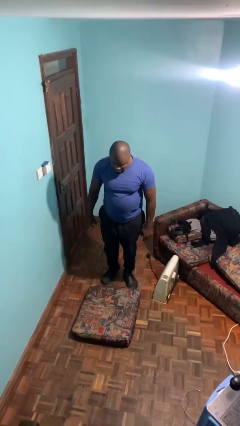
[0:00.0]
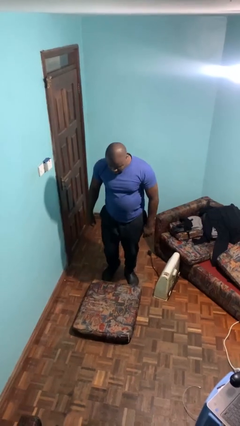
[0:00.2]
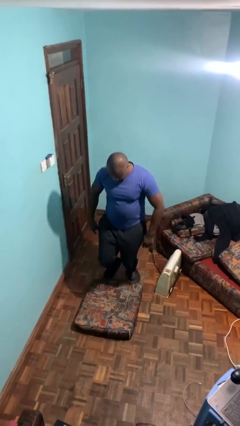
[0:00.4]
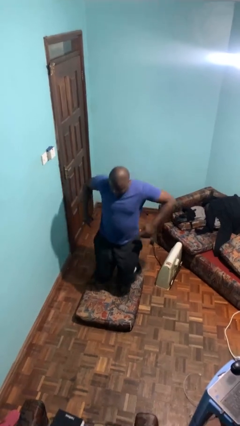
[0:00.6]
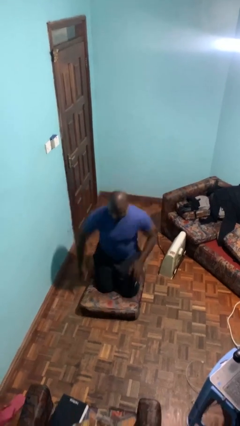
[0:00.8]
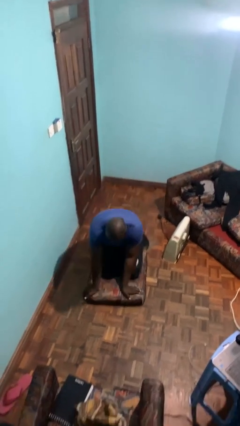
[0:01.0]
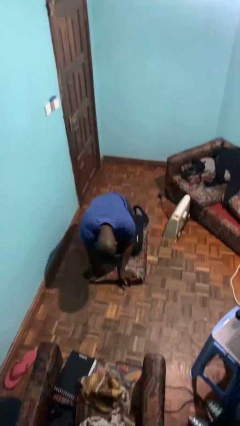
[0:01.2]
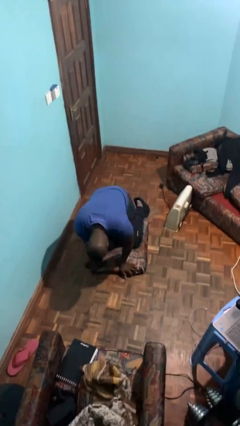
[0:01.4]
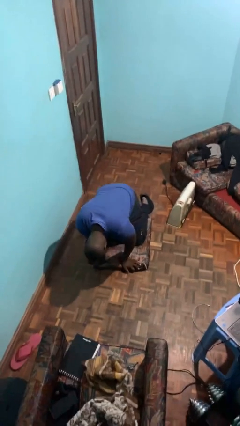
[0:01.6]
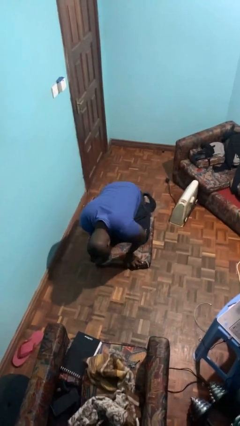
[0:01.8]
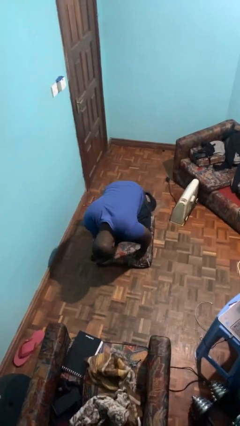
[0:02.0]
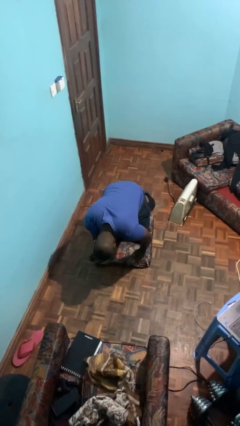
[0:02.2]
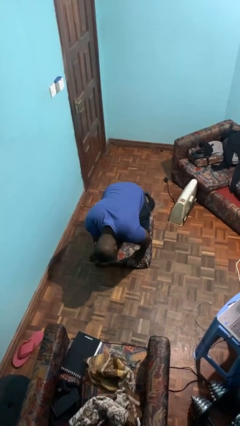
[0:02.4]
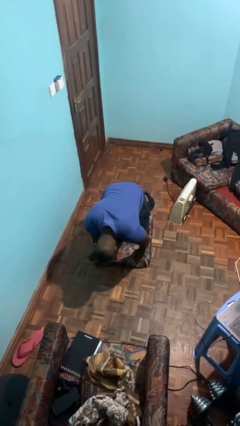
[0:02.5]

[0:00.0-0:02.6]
person trips on object on floor

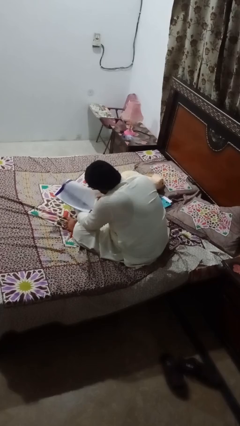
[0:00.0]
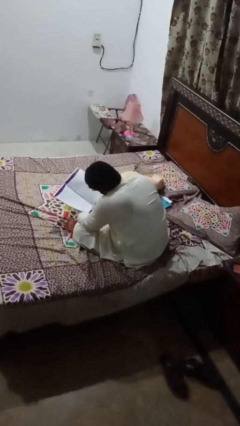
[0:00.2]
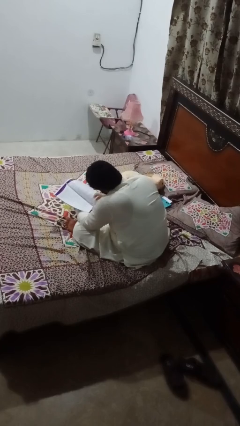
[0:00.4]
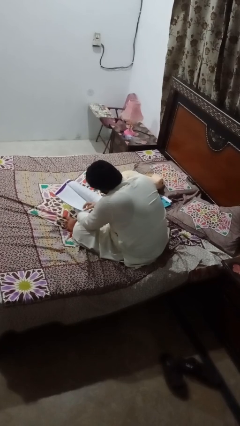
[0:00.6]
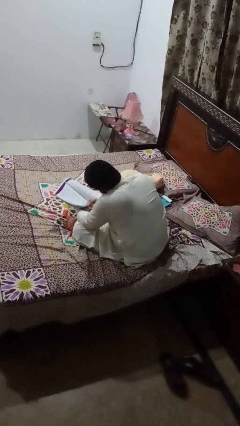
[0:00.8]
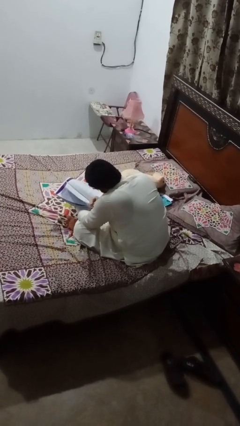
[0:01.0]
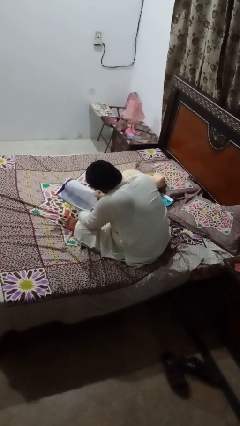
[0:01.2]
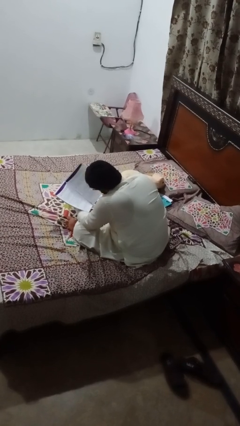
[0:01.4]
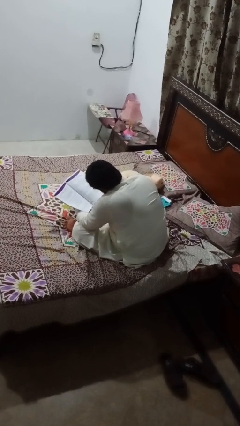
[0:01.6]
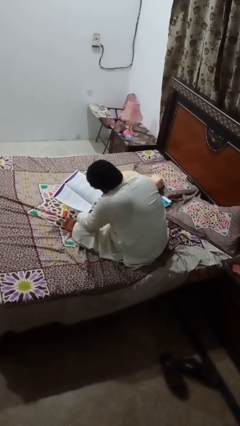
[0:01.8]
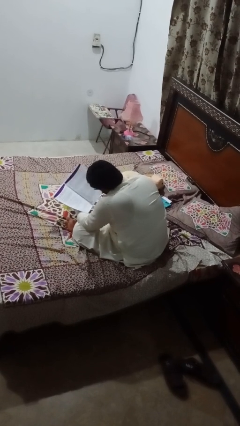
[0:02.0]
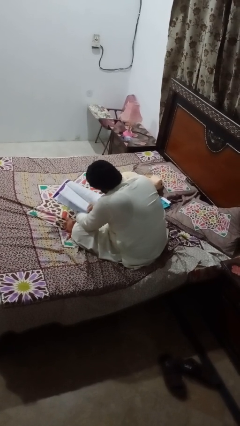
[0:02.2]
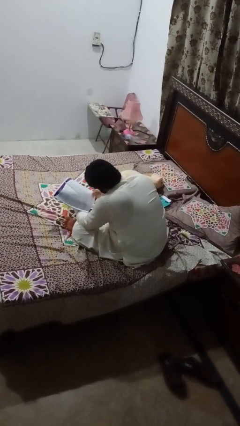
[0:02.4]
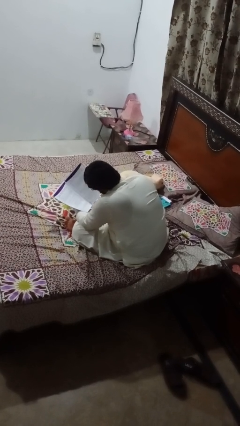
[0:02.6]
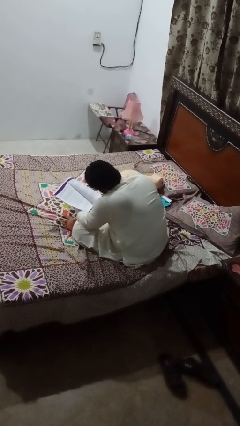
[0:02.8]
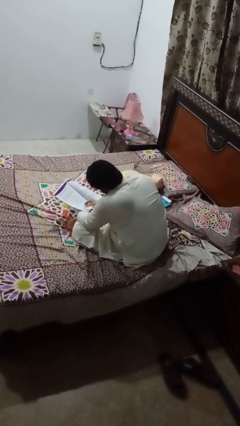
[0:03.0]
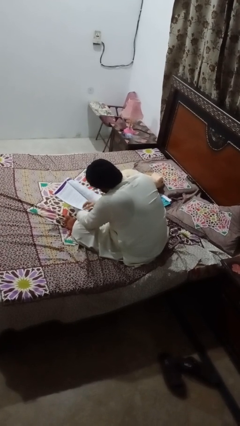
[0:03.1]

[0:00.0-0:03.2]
person reads book

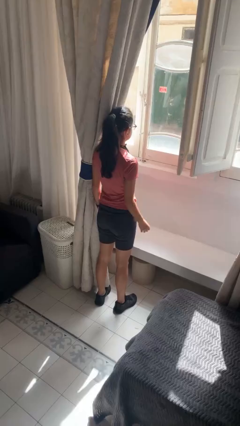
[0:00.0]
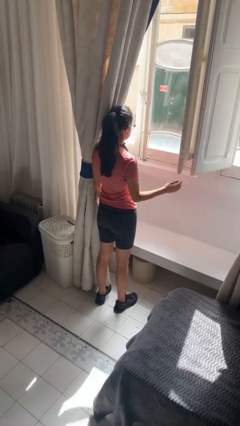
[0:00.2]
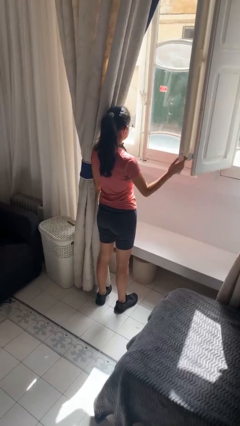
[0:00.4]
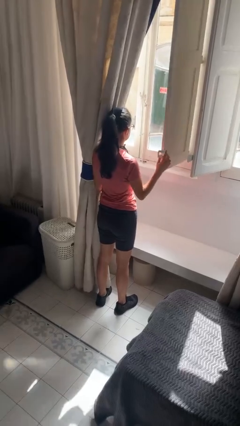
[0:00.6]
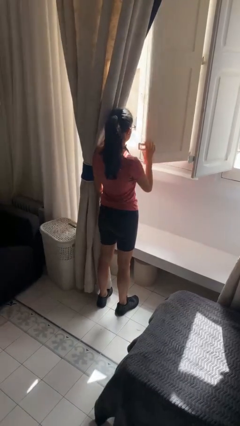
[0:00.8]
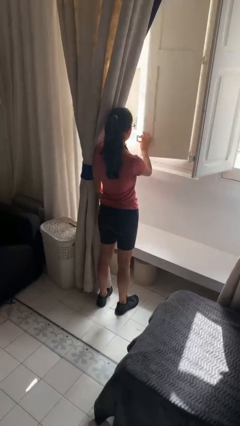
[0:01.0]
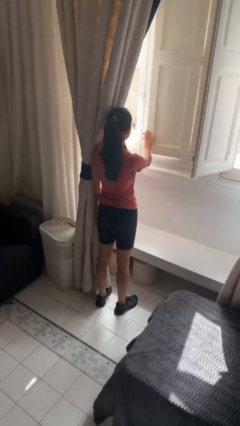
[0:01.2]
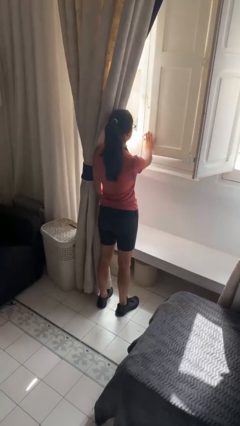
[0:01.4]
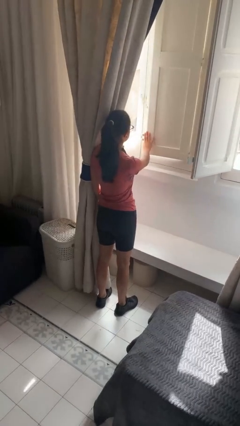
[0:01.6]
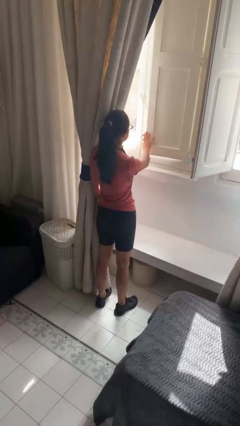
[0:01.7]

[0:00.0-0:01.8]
person closes home window

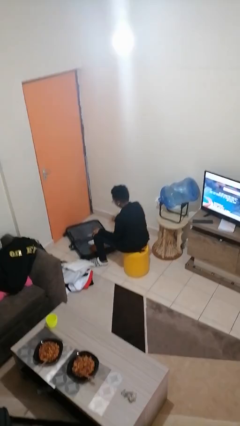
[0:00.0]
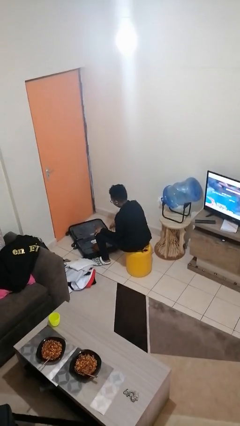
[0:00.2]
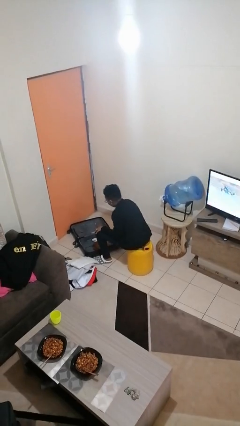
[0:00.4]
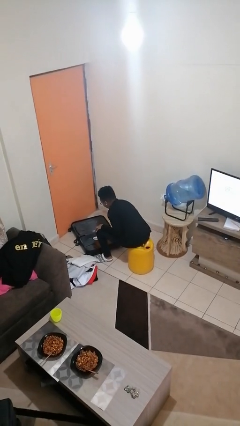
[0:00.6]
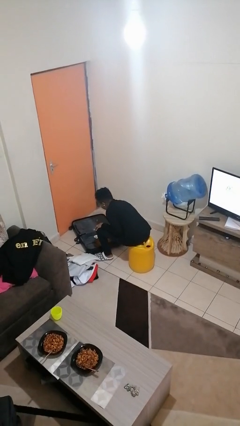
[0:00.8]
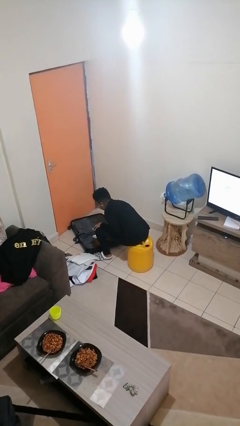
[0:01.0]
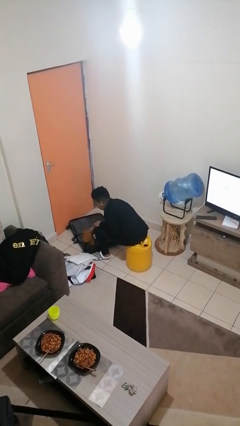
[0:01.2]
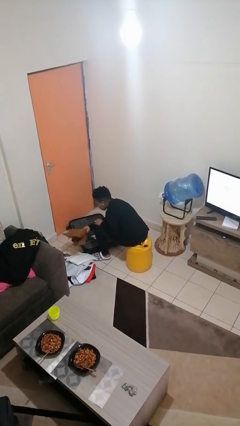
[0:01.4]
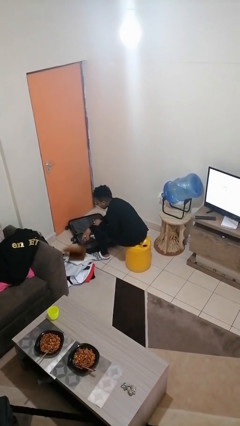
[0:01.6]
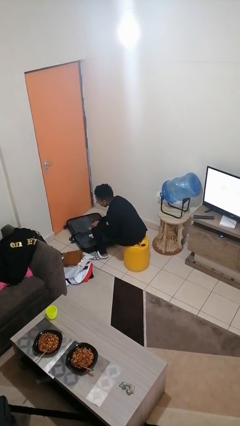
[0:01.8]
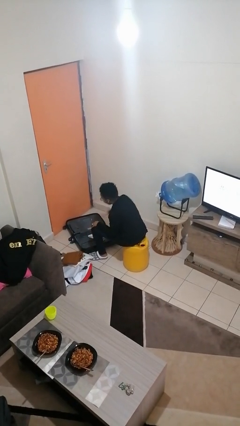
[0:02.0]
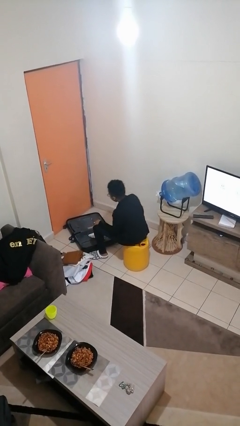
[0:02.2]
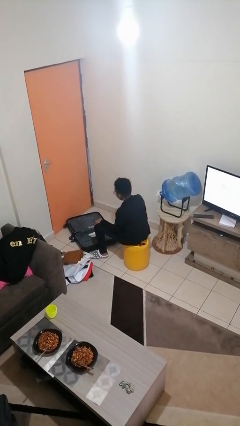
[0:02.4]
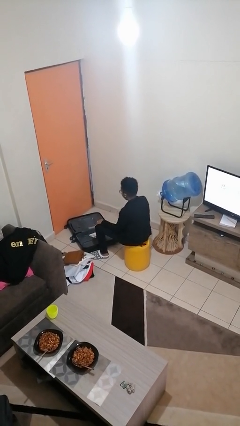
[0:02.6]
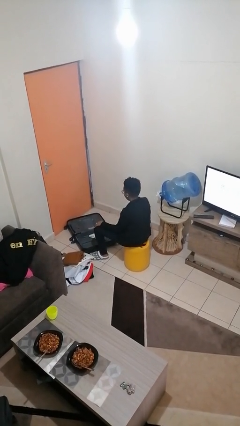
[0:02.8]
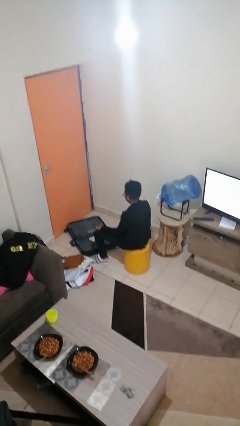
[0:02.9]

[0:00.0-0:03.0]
person unloads clothes from suitcase

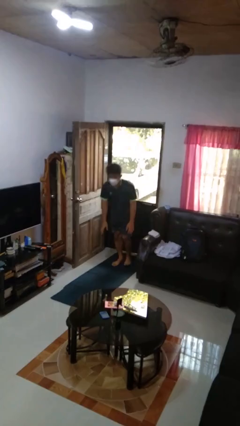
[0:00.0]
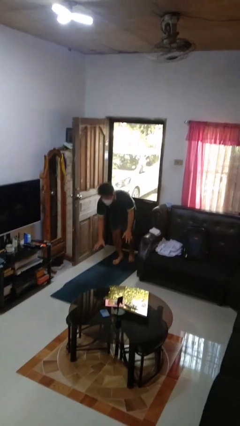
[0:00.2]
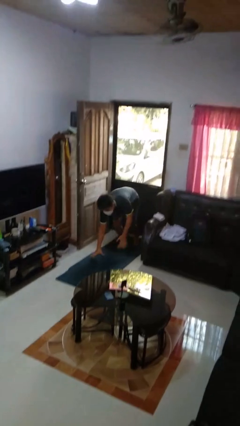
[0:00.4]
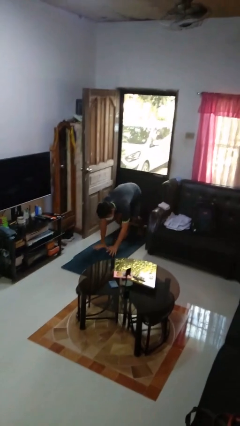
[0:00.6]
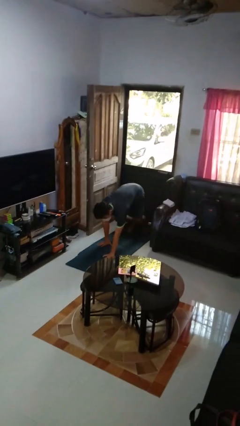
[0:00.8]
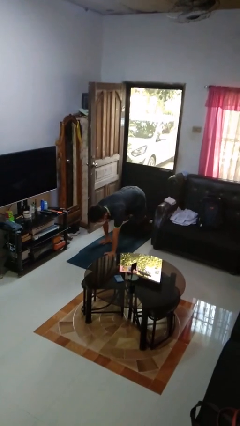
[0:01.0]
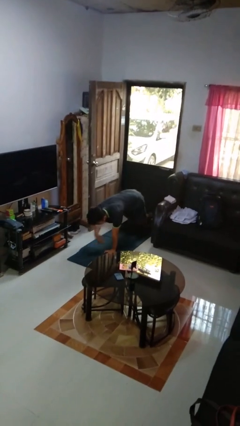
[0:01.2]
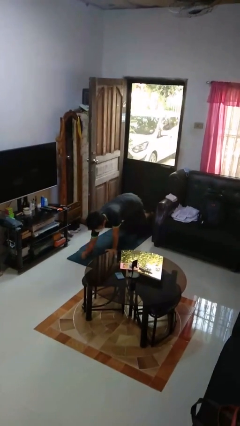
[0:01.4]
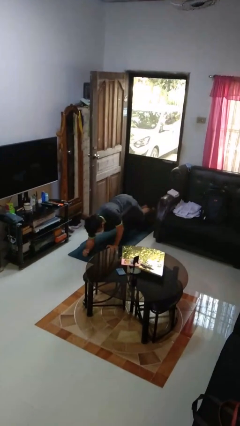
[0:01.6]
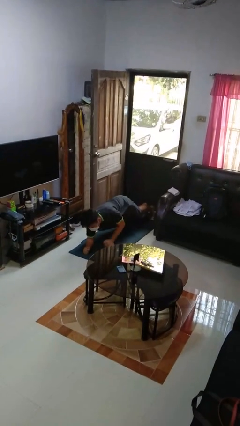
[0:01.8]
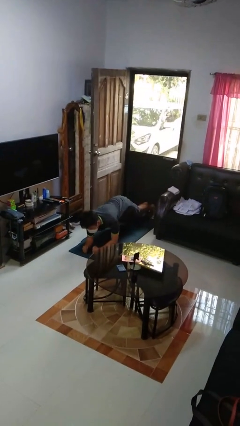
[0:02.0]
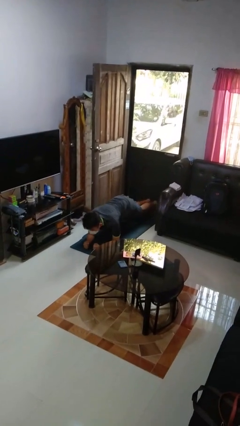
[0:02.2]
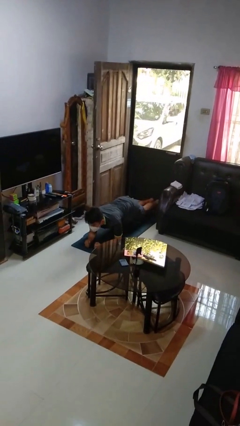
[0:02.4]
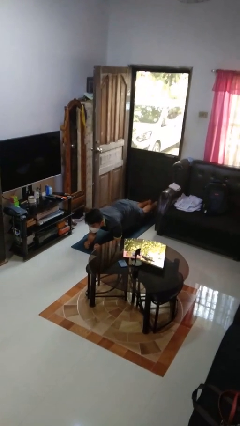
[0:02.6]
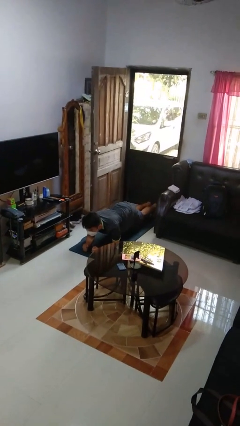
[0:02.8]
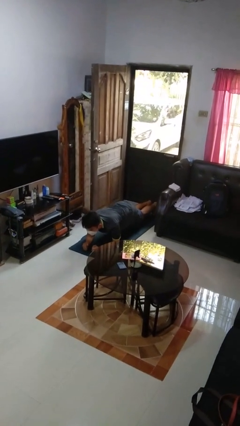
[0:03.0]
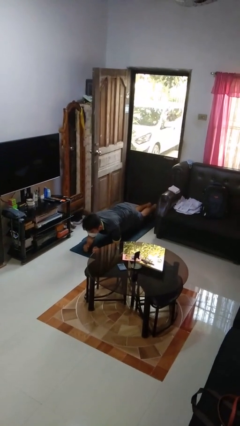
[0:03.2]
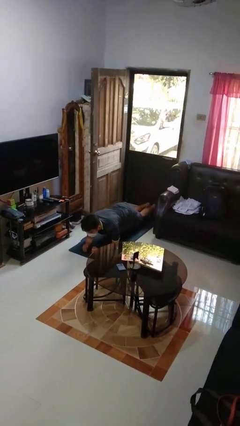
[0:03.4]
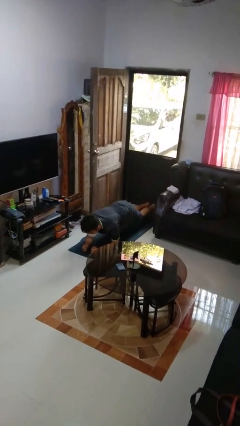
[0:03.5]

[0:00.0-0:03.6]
person exercises with plank

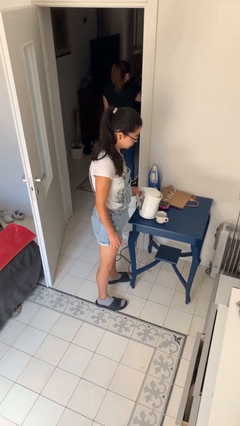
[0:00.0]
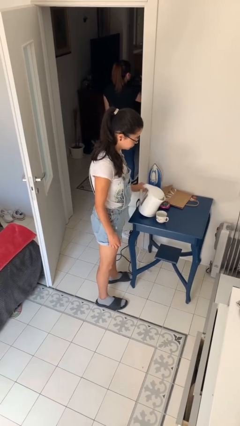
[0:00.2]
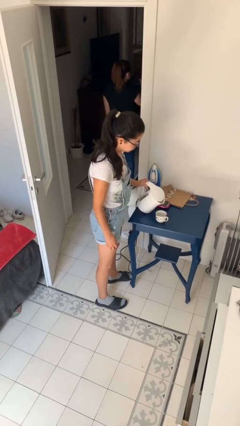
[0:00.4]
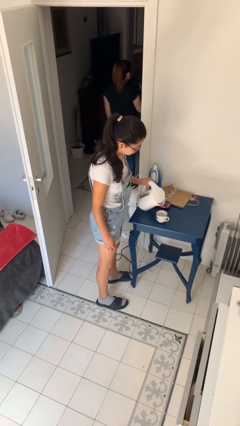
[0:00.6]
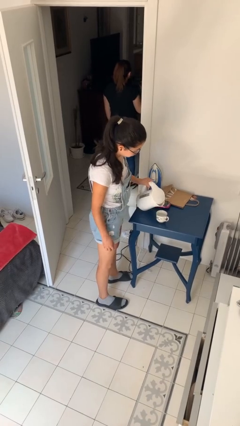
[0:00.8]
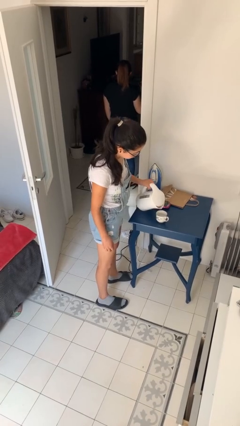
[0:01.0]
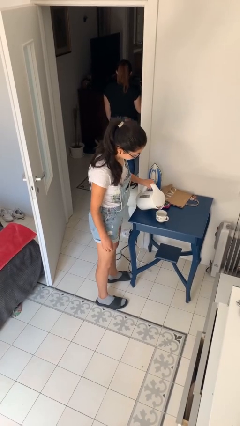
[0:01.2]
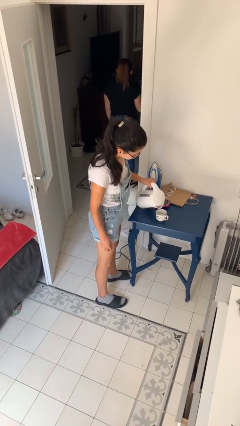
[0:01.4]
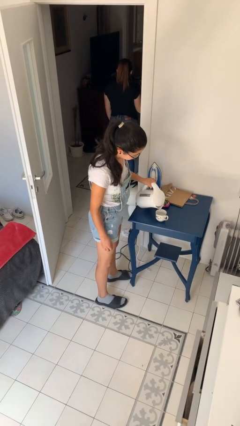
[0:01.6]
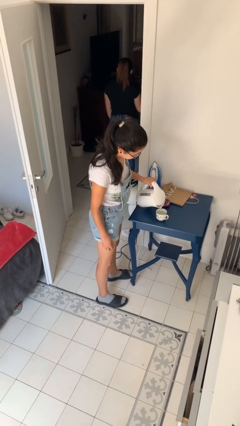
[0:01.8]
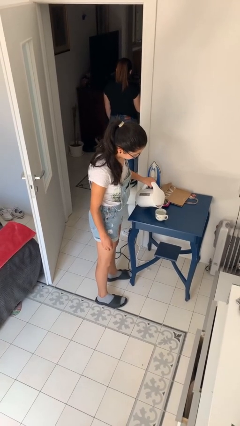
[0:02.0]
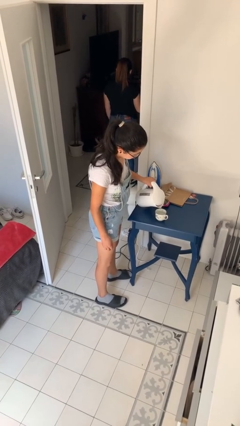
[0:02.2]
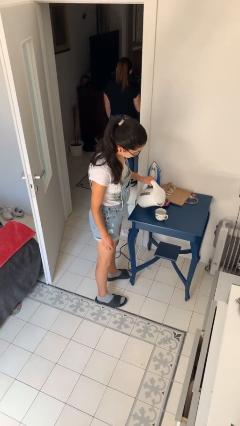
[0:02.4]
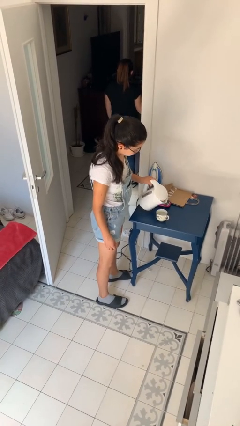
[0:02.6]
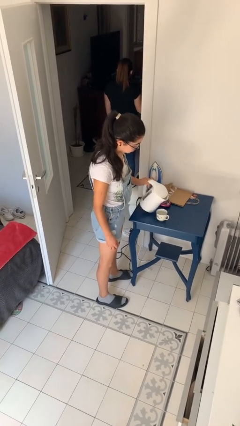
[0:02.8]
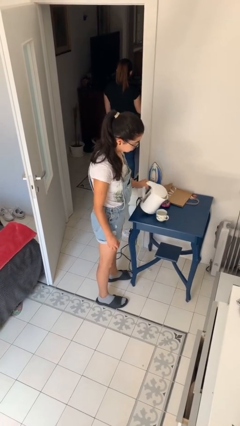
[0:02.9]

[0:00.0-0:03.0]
person pours coffee into mug

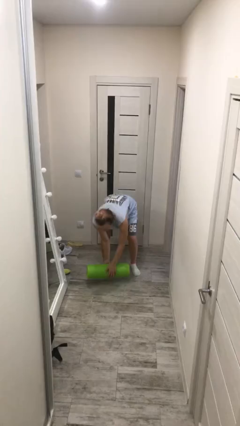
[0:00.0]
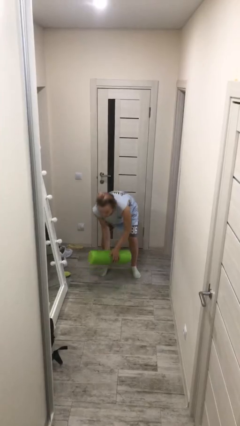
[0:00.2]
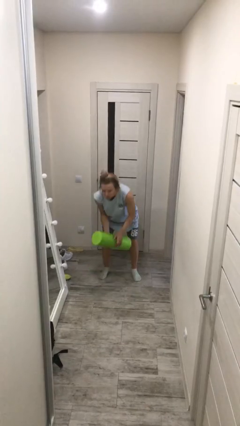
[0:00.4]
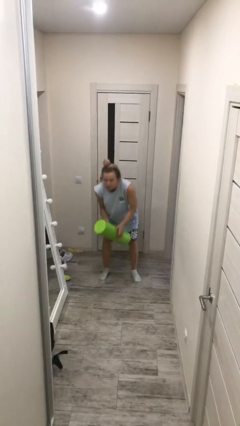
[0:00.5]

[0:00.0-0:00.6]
person picks up object from floor
